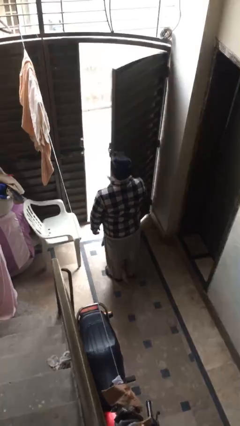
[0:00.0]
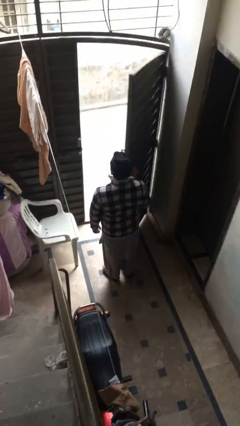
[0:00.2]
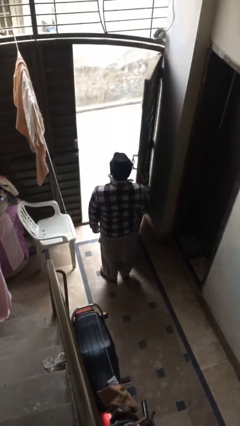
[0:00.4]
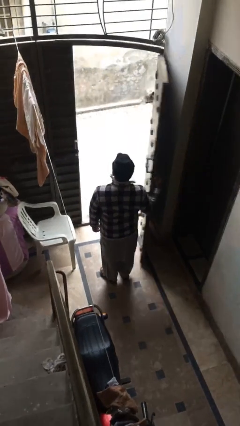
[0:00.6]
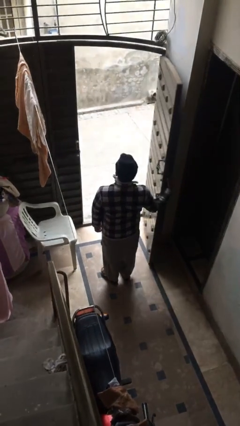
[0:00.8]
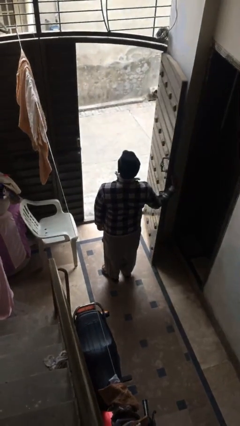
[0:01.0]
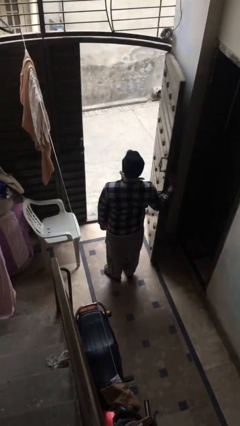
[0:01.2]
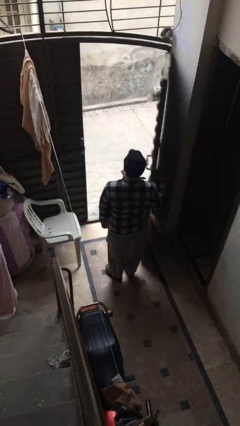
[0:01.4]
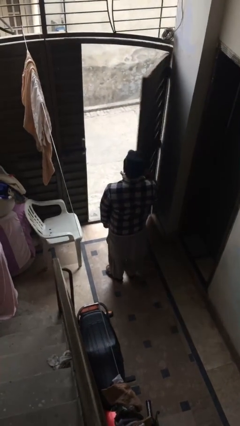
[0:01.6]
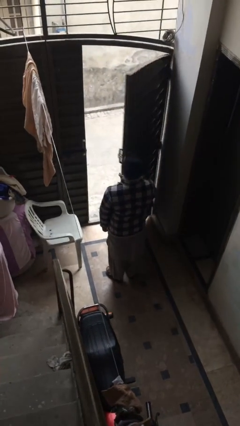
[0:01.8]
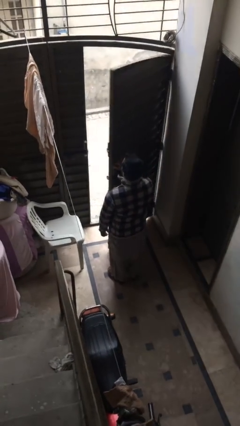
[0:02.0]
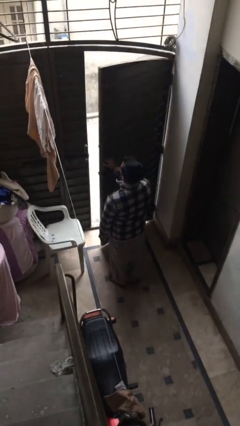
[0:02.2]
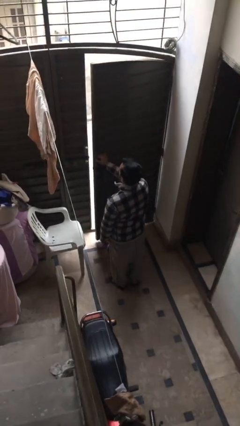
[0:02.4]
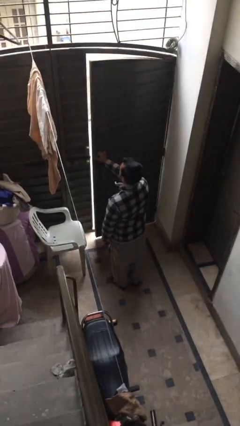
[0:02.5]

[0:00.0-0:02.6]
person closes facility door

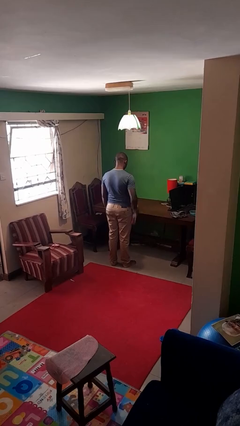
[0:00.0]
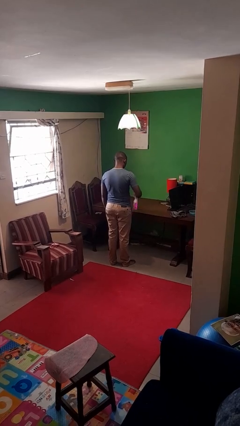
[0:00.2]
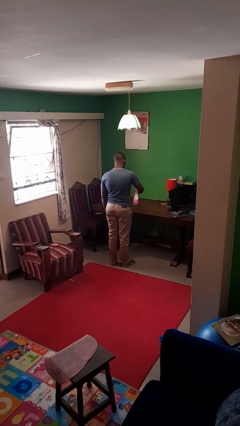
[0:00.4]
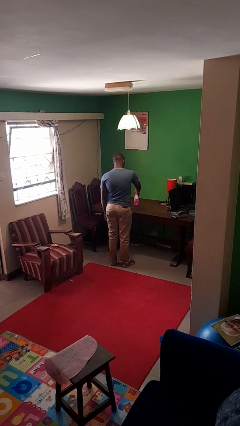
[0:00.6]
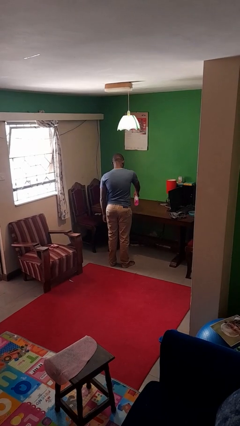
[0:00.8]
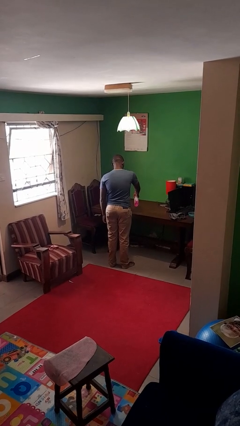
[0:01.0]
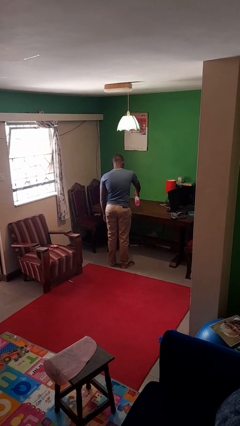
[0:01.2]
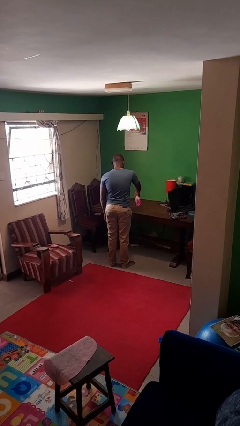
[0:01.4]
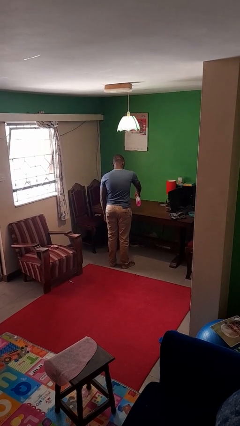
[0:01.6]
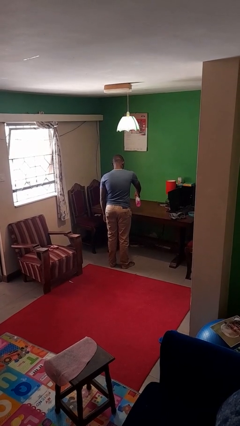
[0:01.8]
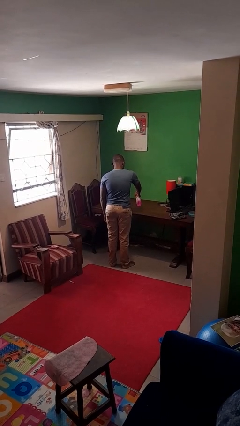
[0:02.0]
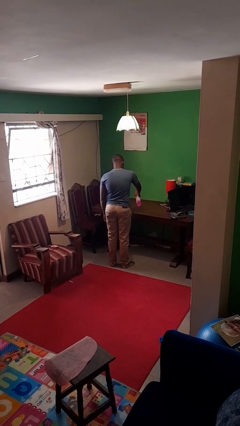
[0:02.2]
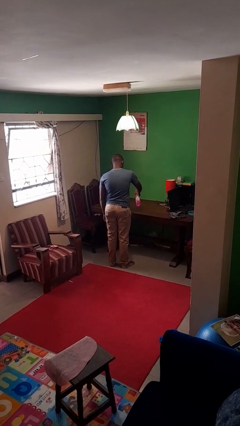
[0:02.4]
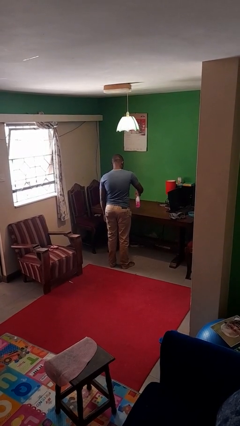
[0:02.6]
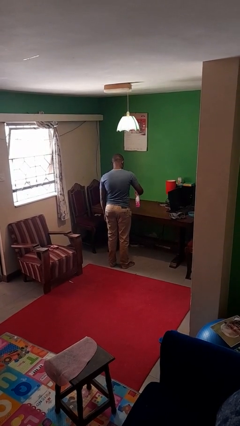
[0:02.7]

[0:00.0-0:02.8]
person sprays from bottle

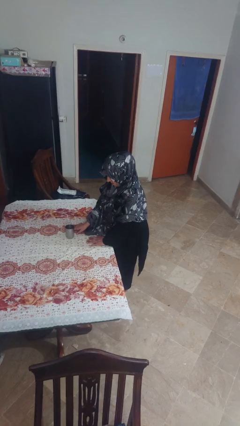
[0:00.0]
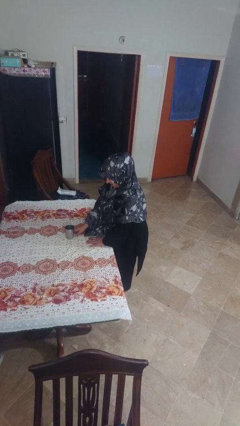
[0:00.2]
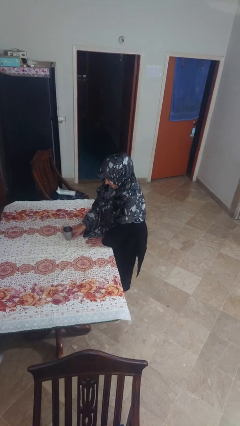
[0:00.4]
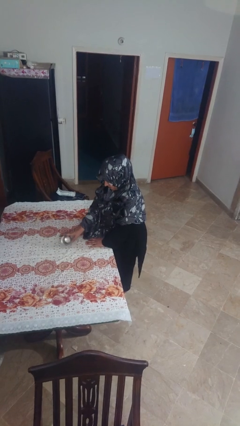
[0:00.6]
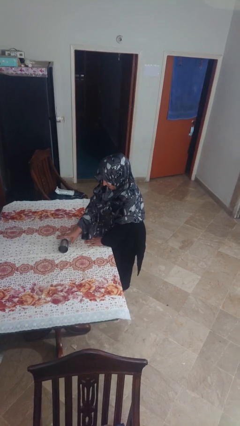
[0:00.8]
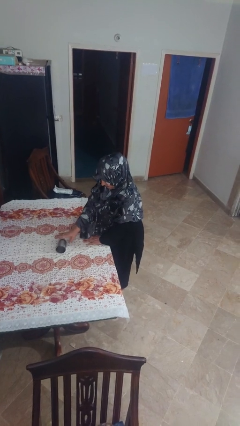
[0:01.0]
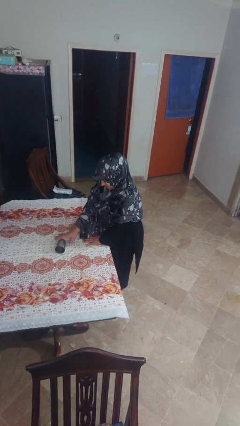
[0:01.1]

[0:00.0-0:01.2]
person knocks over glass

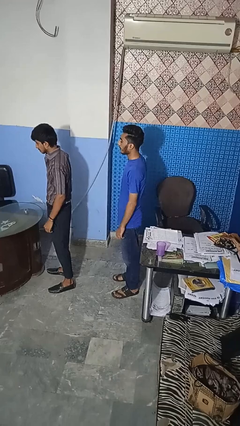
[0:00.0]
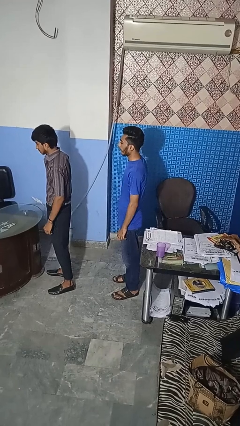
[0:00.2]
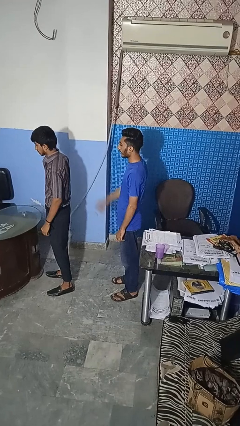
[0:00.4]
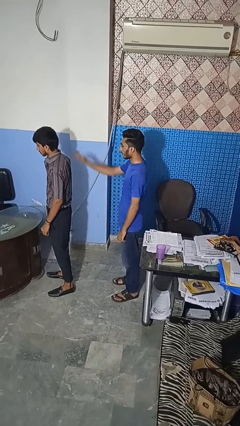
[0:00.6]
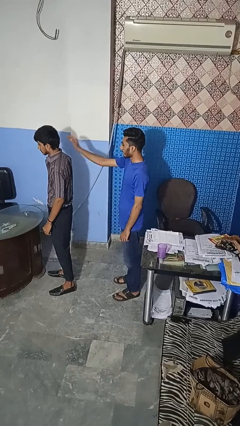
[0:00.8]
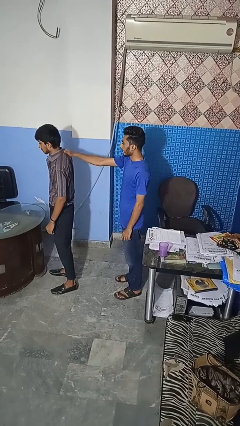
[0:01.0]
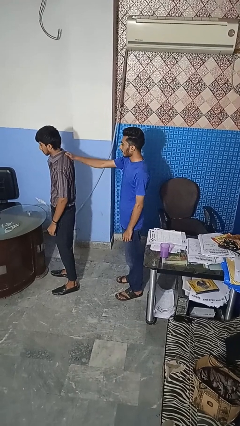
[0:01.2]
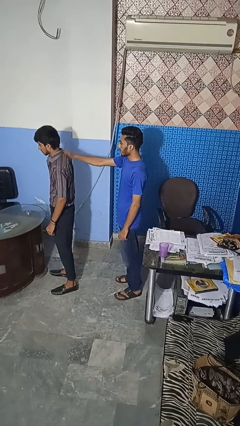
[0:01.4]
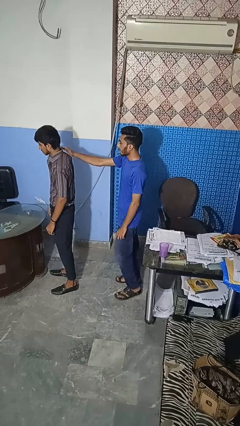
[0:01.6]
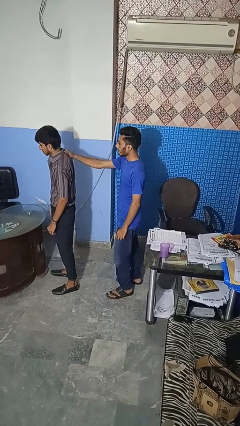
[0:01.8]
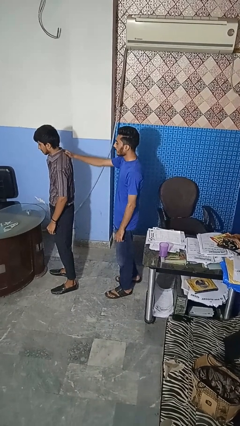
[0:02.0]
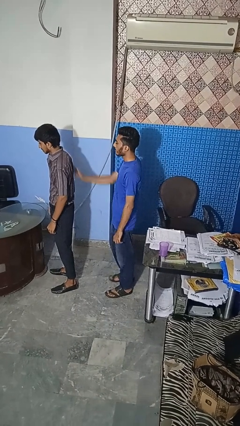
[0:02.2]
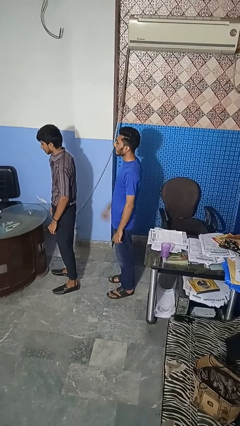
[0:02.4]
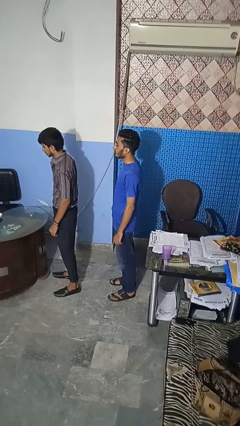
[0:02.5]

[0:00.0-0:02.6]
person touches back of person

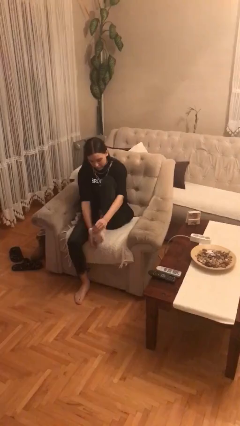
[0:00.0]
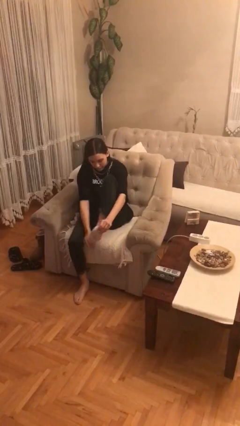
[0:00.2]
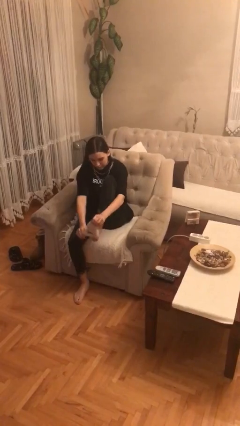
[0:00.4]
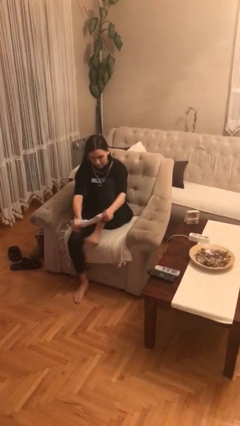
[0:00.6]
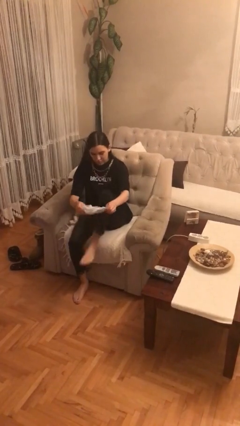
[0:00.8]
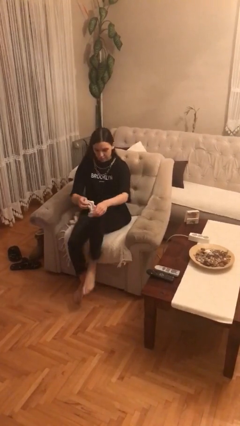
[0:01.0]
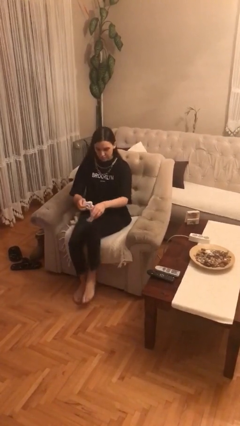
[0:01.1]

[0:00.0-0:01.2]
person takes off socks

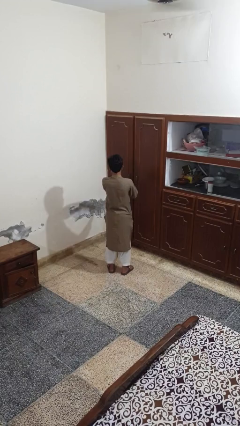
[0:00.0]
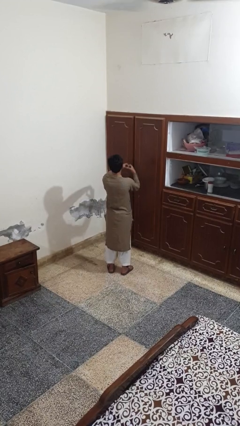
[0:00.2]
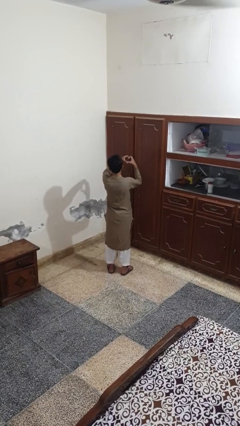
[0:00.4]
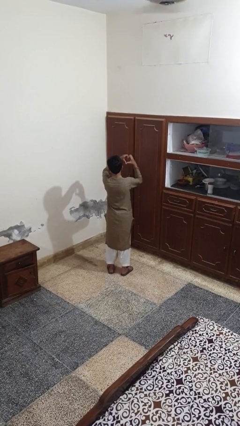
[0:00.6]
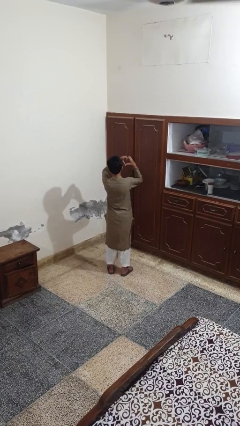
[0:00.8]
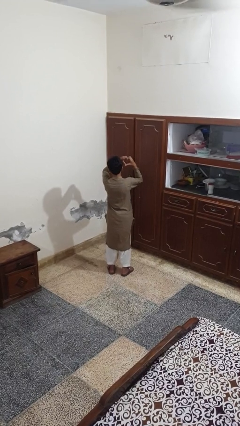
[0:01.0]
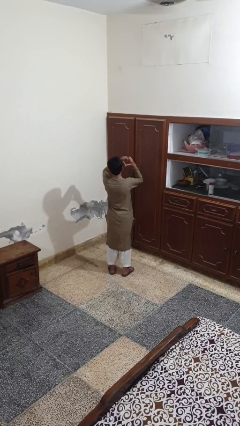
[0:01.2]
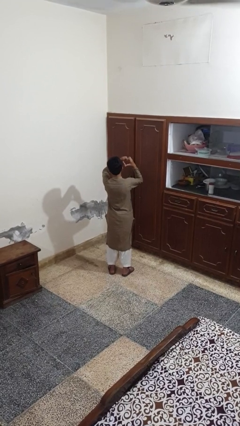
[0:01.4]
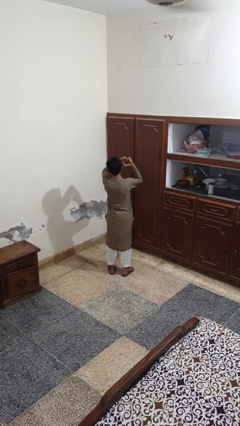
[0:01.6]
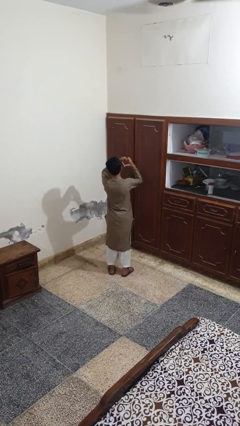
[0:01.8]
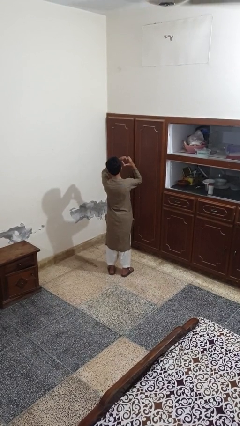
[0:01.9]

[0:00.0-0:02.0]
person gestures heart

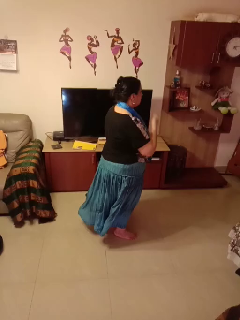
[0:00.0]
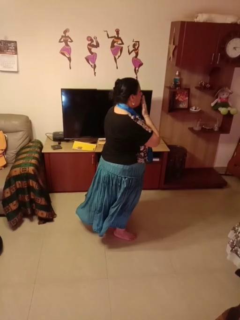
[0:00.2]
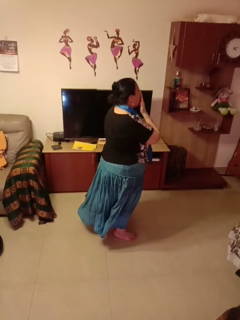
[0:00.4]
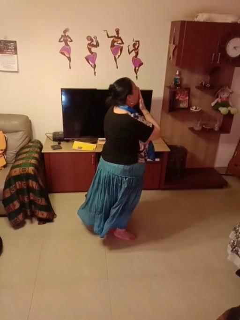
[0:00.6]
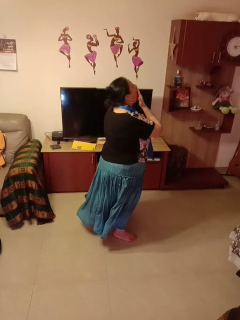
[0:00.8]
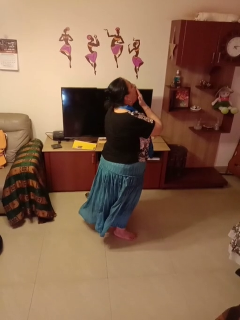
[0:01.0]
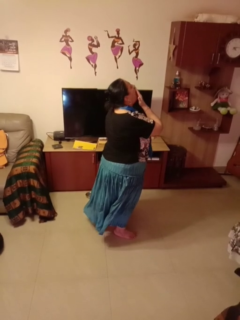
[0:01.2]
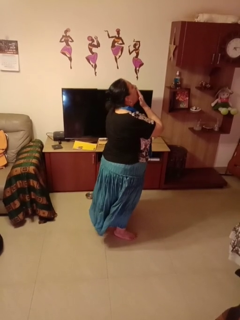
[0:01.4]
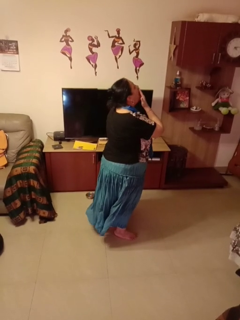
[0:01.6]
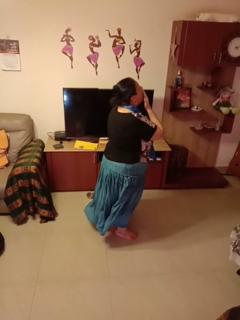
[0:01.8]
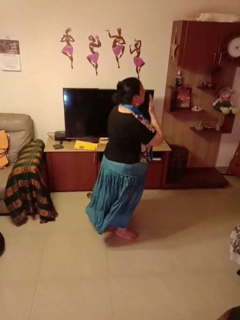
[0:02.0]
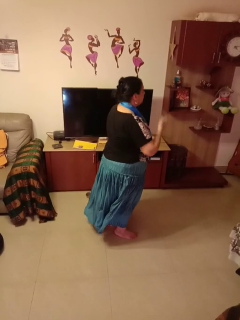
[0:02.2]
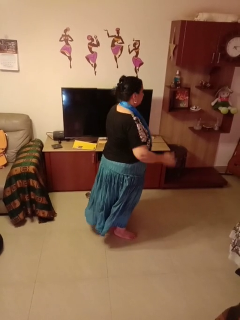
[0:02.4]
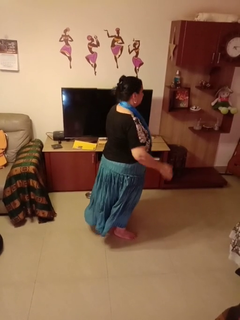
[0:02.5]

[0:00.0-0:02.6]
person yawns

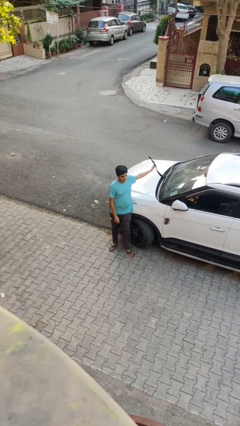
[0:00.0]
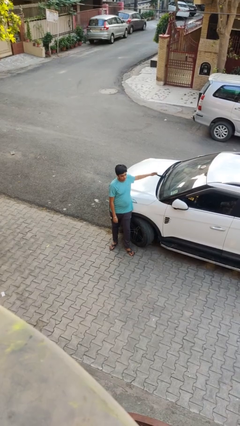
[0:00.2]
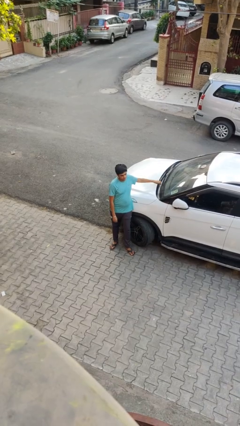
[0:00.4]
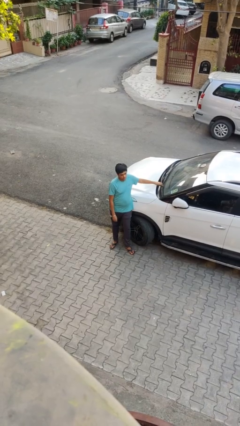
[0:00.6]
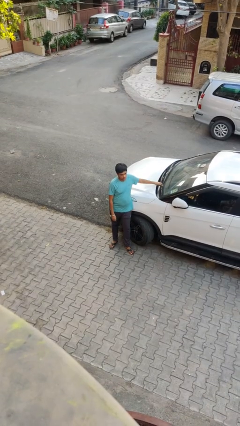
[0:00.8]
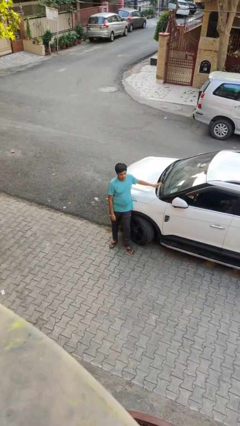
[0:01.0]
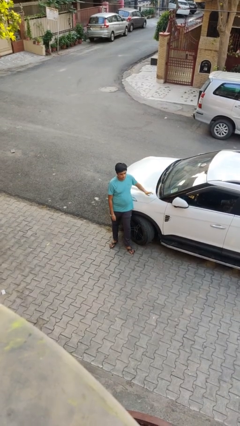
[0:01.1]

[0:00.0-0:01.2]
person flips down car wipers

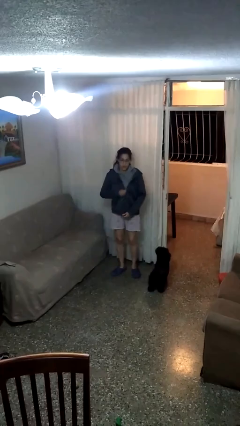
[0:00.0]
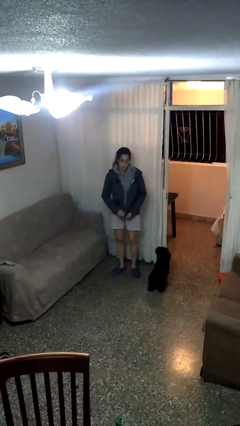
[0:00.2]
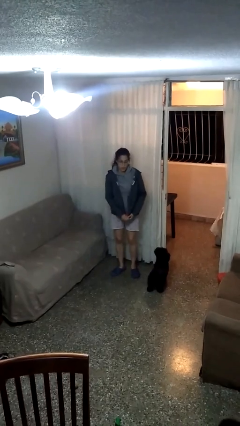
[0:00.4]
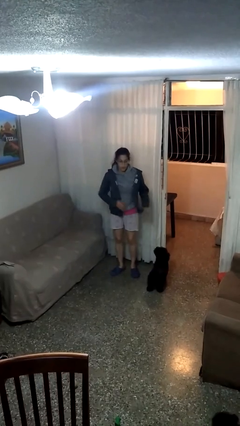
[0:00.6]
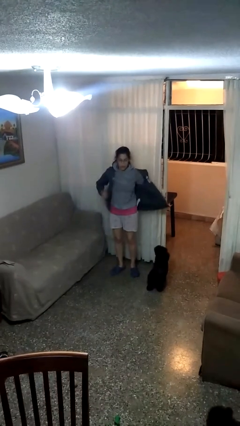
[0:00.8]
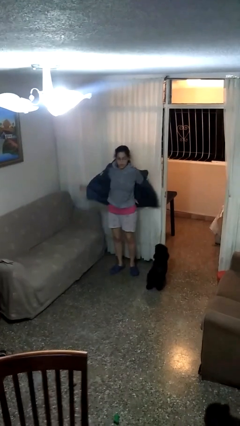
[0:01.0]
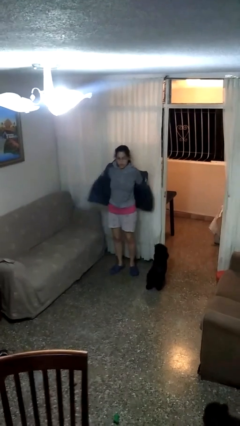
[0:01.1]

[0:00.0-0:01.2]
person unzips jacket
